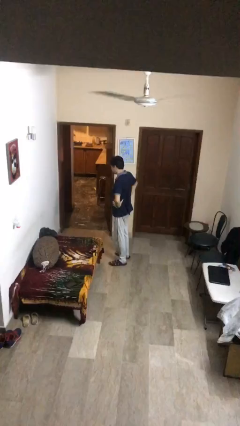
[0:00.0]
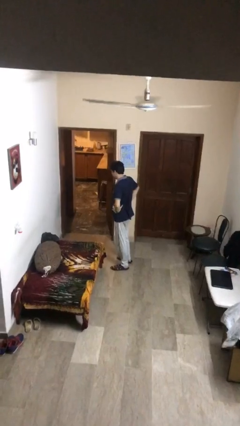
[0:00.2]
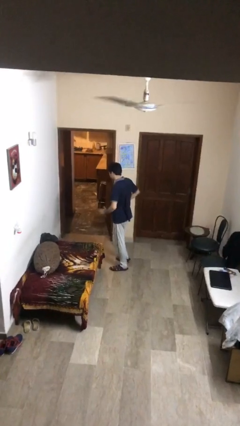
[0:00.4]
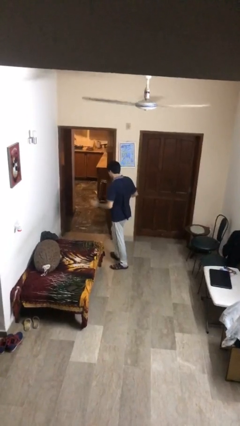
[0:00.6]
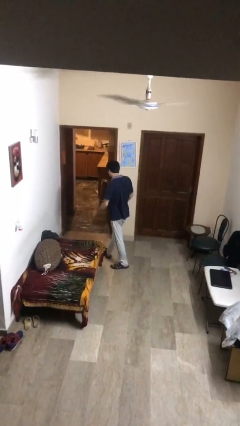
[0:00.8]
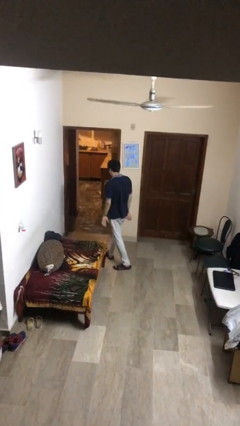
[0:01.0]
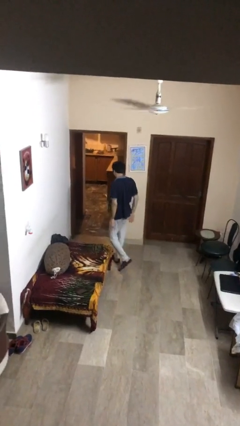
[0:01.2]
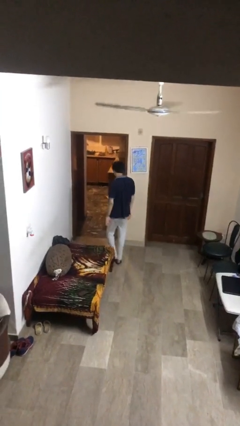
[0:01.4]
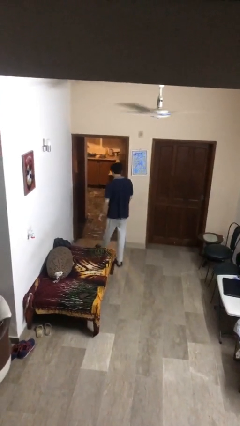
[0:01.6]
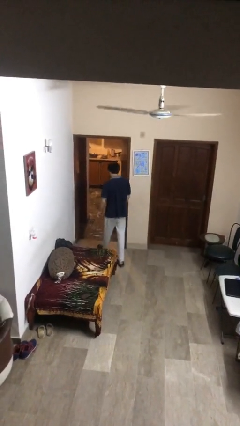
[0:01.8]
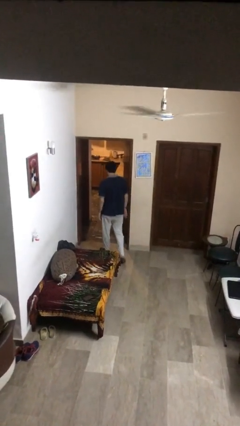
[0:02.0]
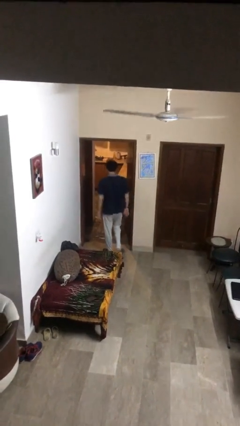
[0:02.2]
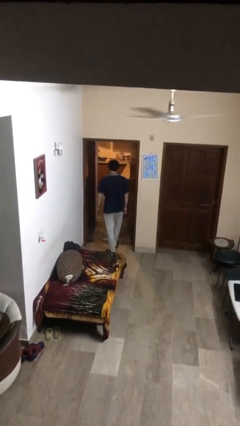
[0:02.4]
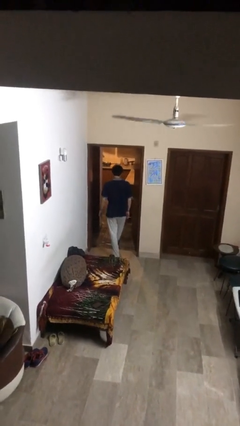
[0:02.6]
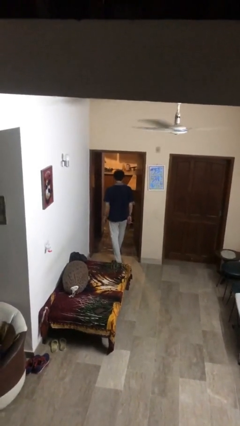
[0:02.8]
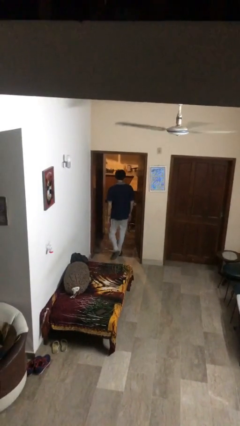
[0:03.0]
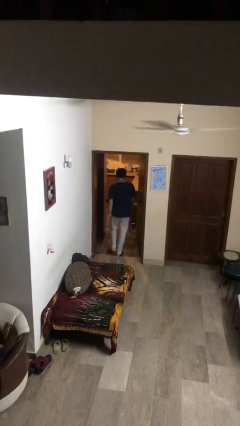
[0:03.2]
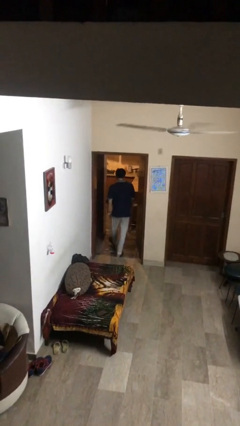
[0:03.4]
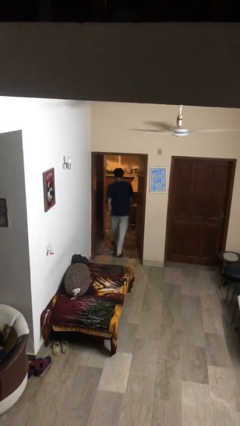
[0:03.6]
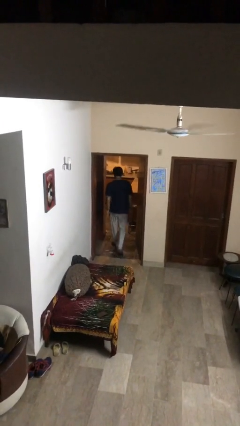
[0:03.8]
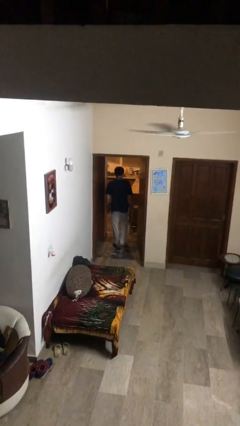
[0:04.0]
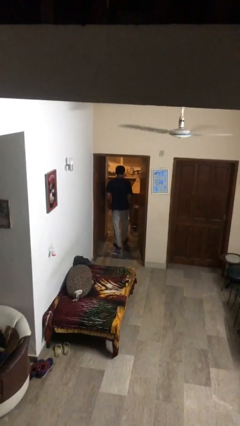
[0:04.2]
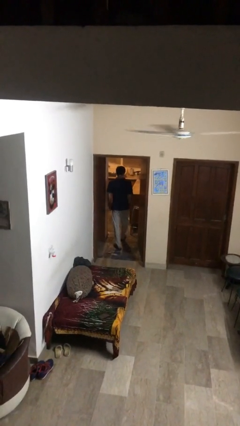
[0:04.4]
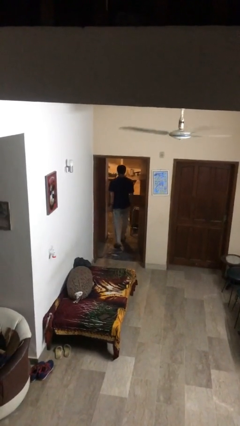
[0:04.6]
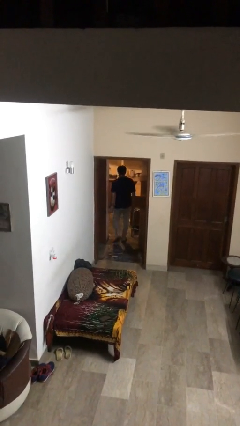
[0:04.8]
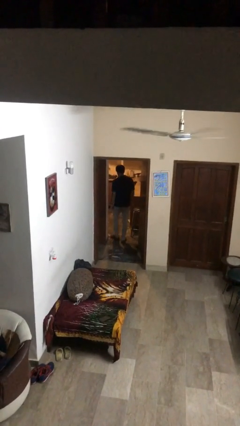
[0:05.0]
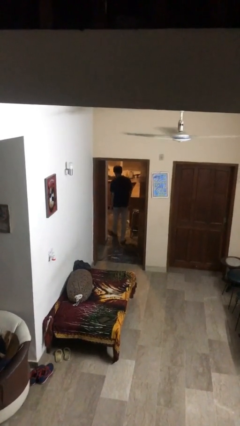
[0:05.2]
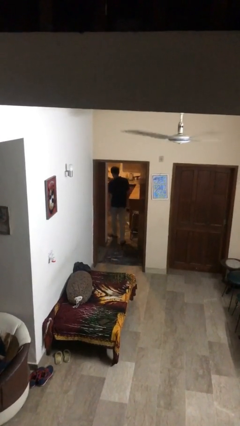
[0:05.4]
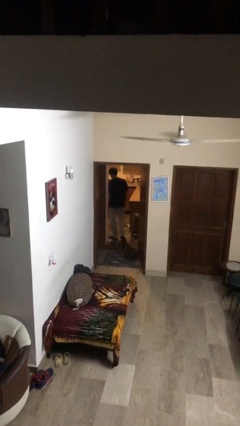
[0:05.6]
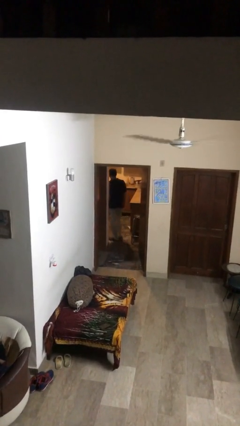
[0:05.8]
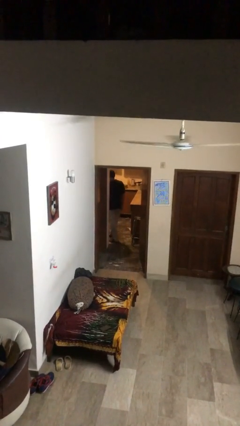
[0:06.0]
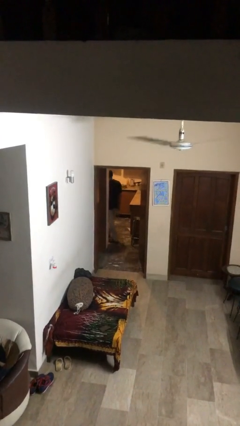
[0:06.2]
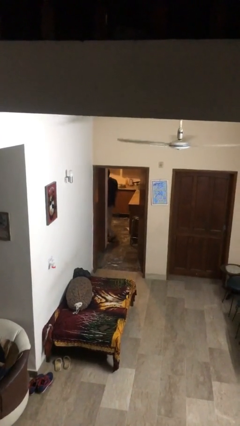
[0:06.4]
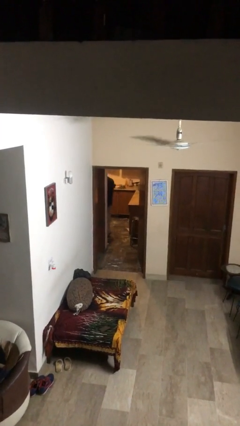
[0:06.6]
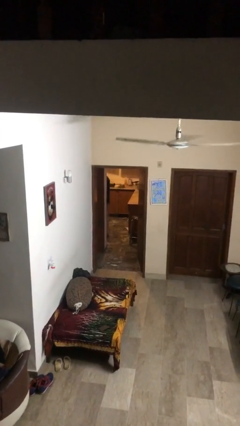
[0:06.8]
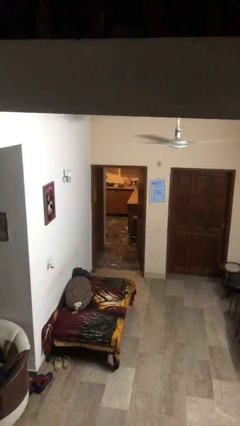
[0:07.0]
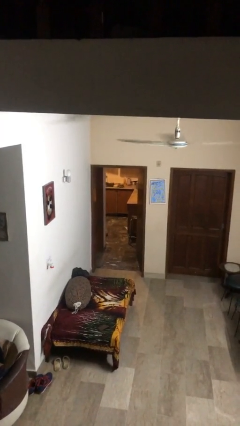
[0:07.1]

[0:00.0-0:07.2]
person exits scene through structure

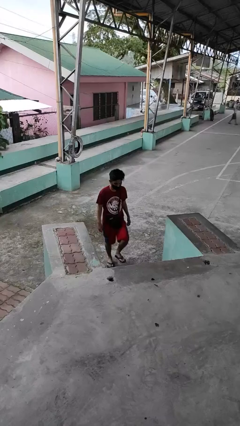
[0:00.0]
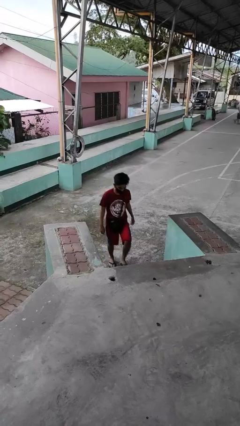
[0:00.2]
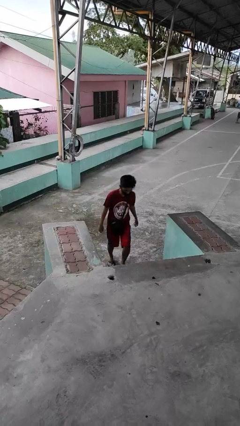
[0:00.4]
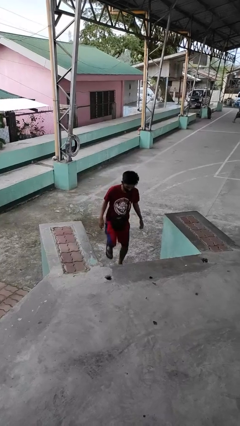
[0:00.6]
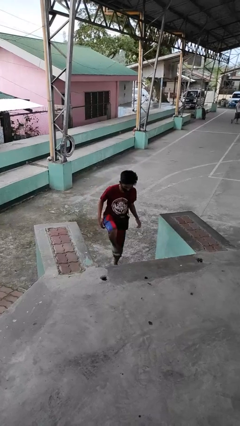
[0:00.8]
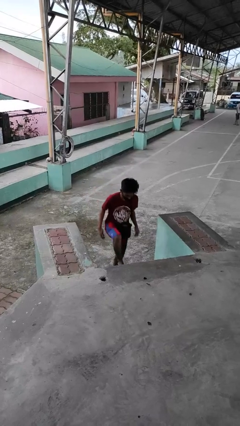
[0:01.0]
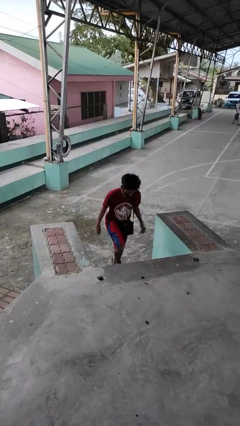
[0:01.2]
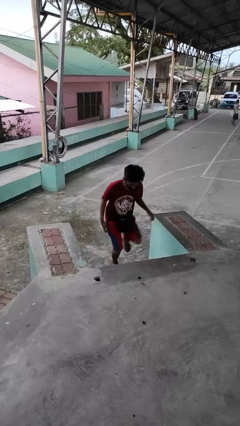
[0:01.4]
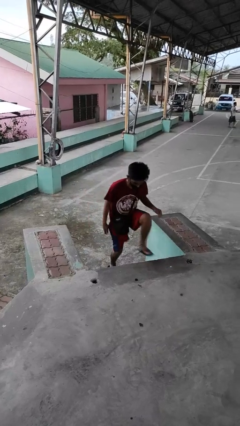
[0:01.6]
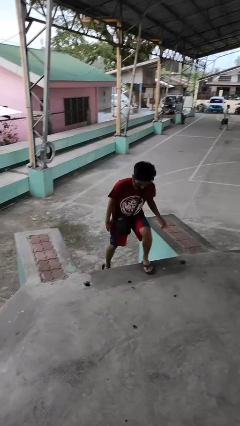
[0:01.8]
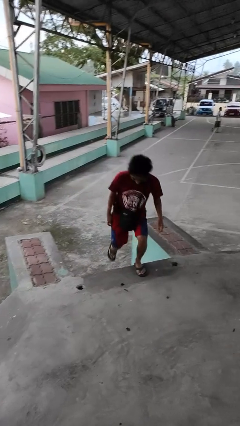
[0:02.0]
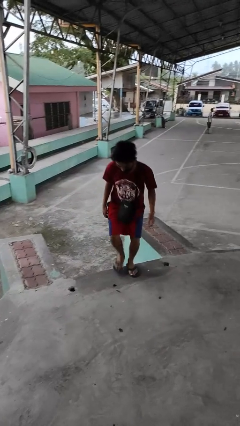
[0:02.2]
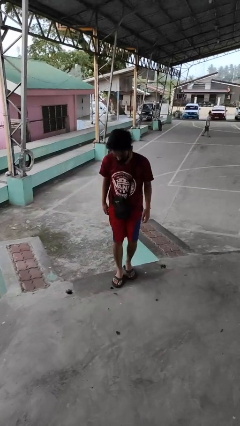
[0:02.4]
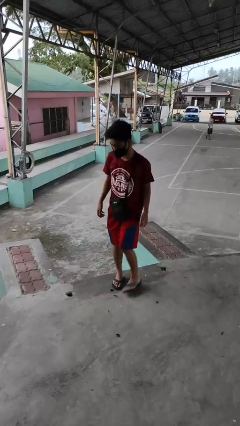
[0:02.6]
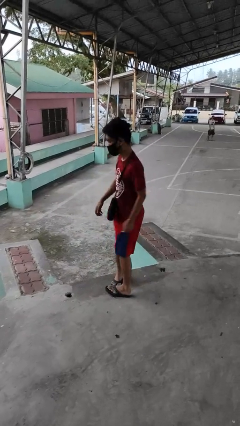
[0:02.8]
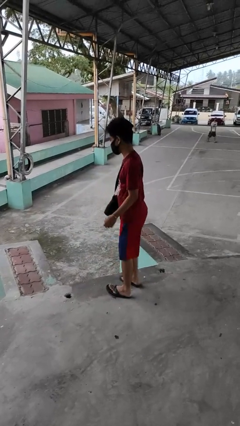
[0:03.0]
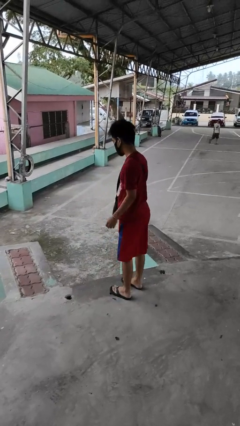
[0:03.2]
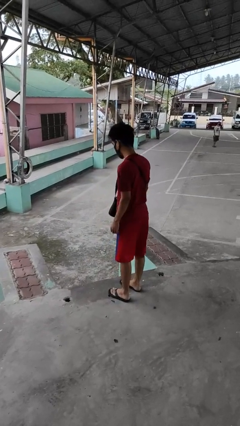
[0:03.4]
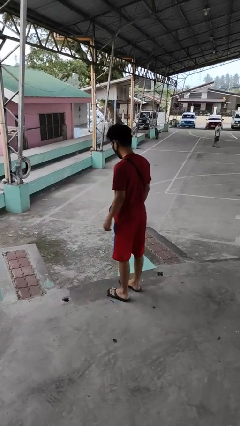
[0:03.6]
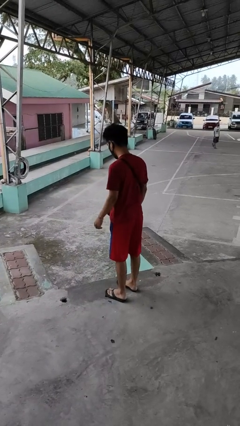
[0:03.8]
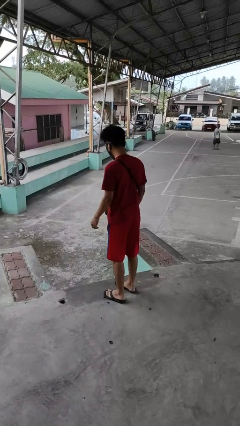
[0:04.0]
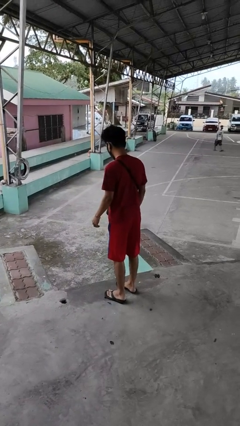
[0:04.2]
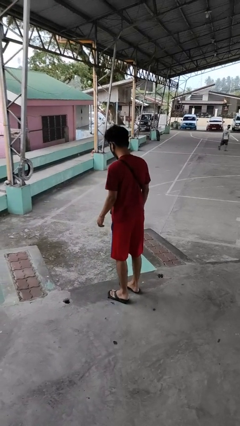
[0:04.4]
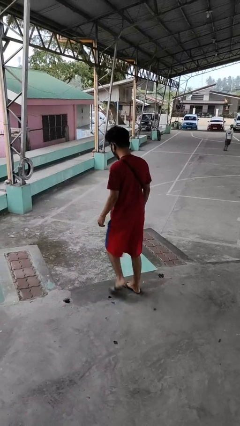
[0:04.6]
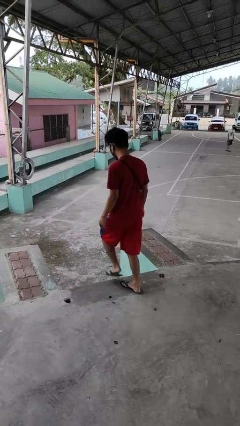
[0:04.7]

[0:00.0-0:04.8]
person climbs up stairs

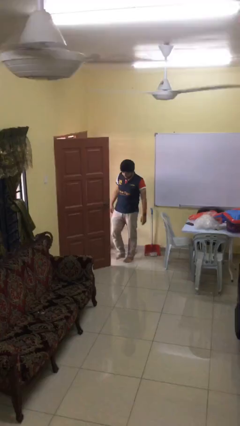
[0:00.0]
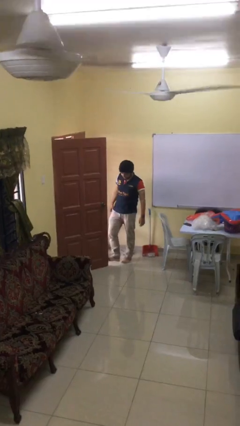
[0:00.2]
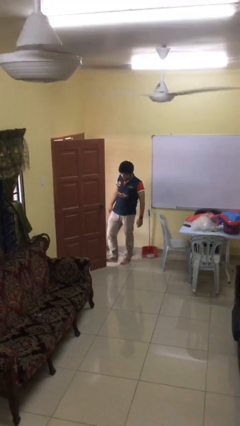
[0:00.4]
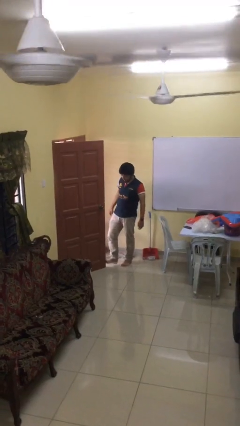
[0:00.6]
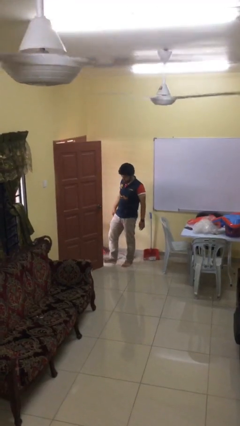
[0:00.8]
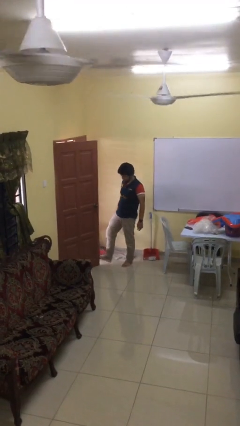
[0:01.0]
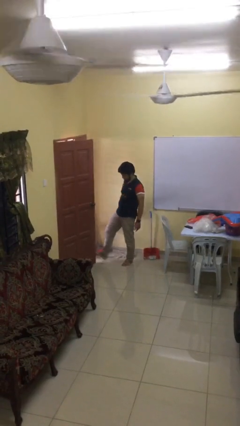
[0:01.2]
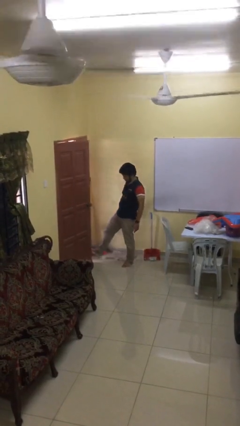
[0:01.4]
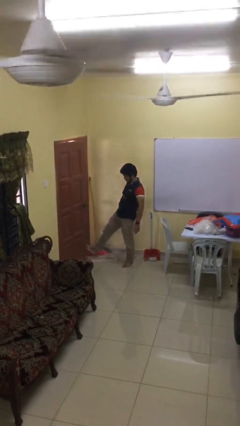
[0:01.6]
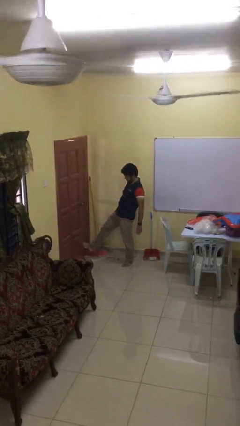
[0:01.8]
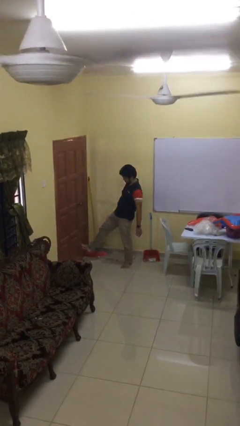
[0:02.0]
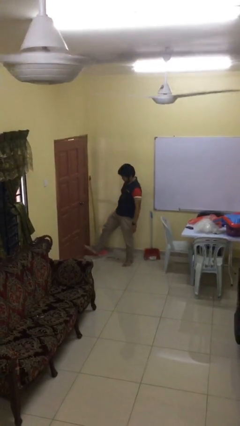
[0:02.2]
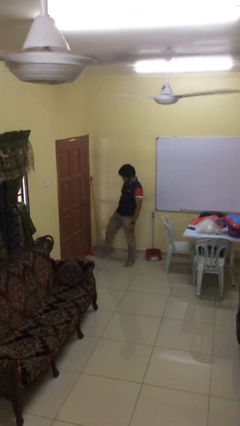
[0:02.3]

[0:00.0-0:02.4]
person closes door with foot

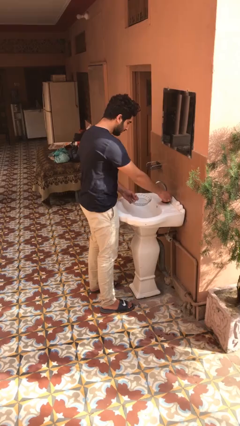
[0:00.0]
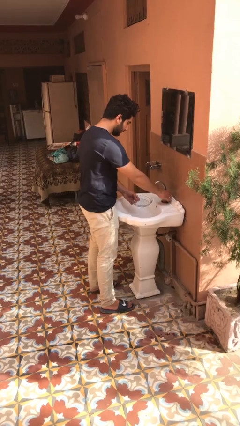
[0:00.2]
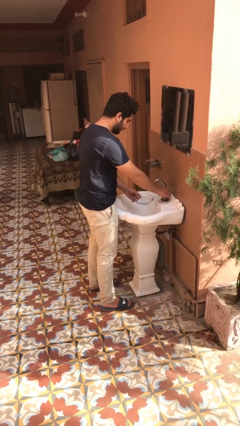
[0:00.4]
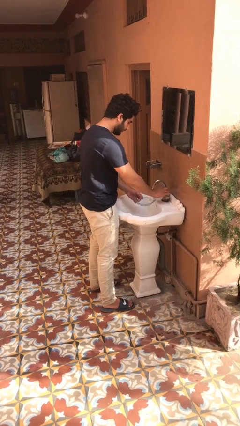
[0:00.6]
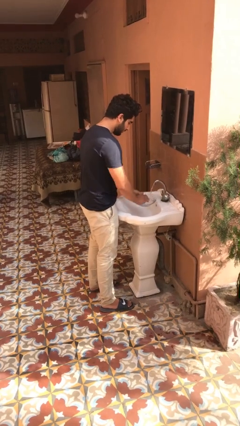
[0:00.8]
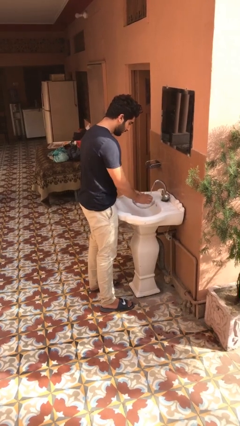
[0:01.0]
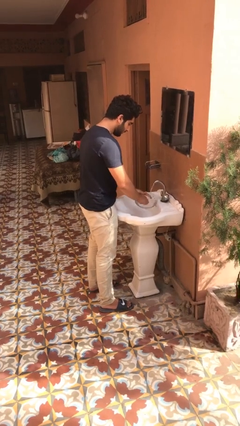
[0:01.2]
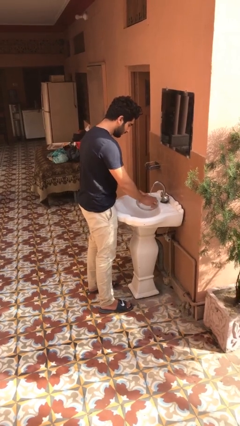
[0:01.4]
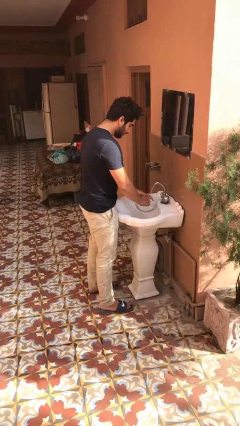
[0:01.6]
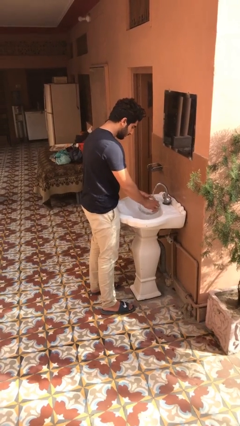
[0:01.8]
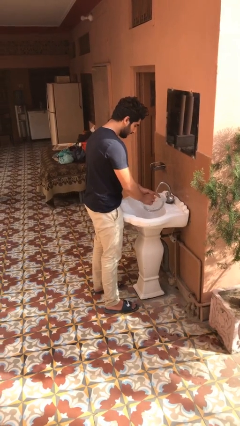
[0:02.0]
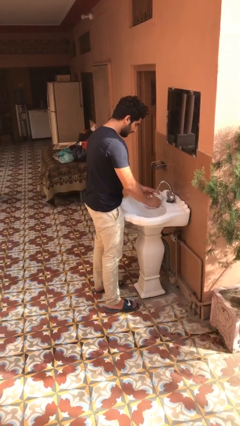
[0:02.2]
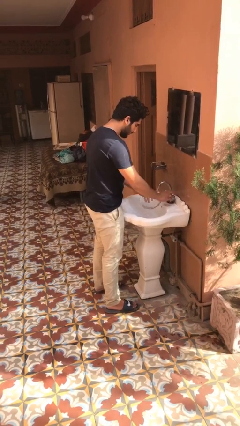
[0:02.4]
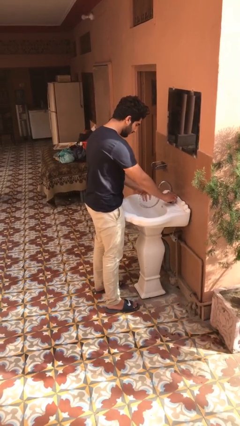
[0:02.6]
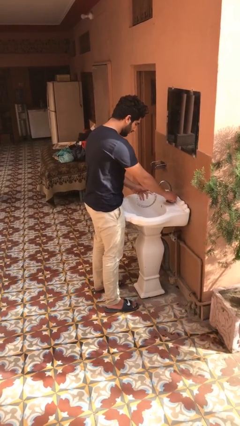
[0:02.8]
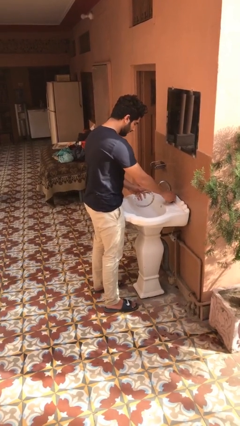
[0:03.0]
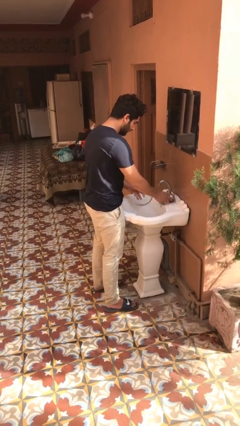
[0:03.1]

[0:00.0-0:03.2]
person washes dish
